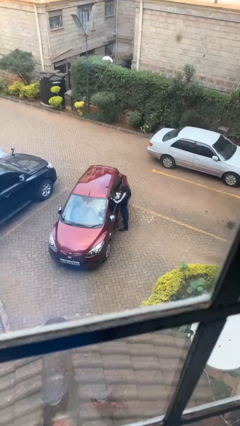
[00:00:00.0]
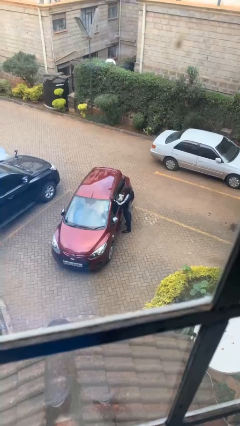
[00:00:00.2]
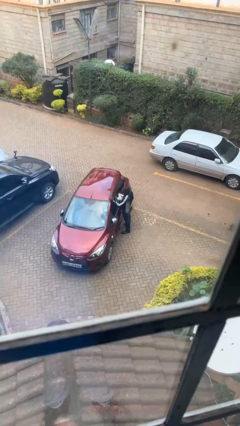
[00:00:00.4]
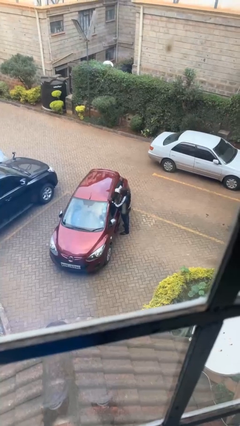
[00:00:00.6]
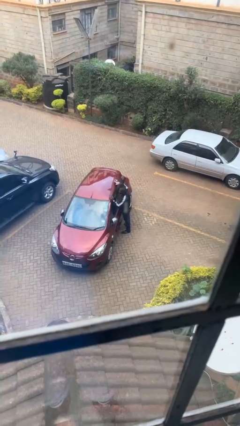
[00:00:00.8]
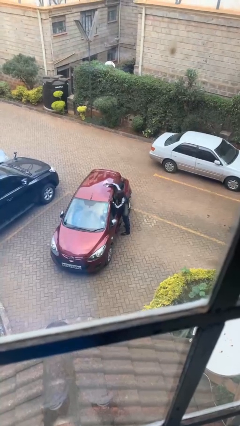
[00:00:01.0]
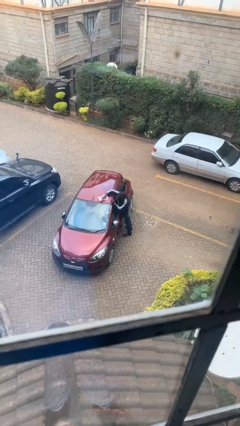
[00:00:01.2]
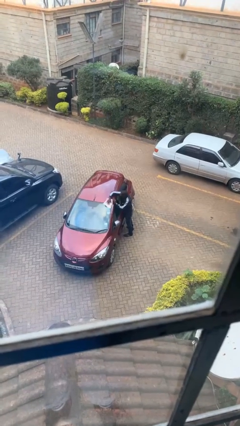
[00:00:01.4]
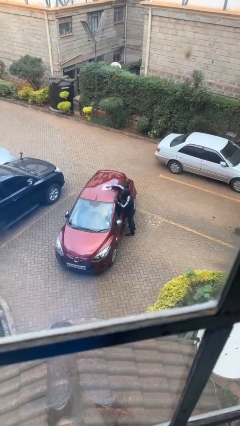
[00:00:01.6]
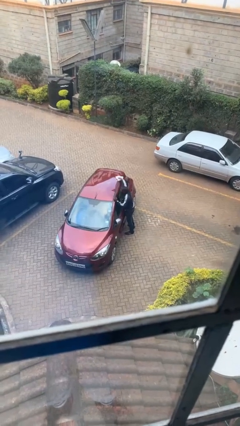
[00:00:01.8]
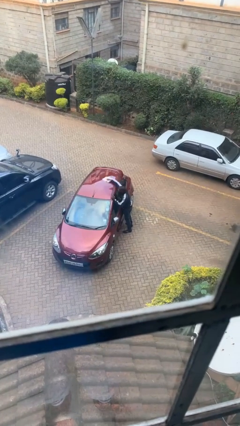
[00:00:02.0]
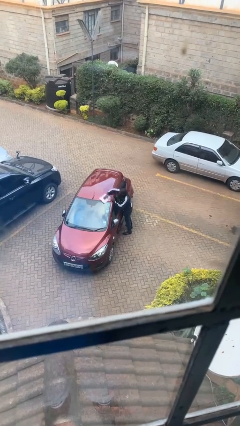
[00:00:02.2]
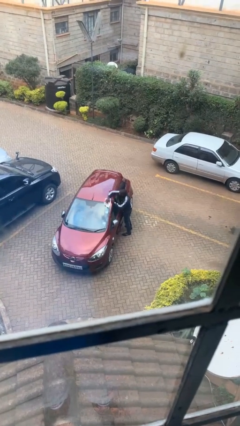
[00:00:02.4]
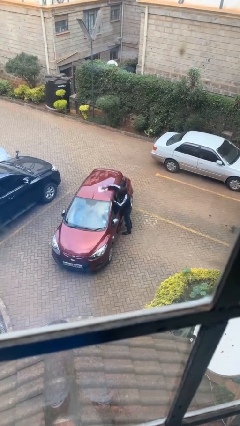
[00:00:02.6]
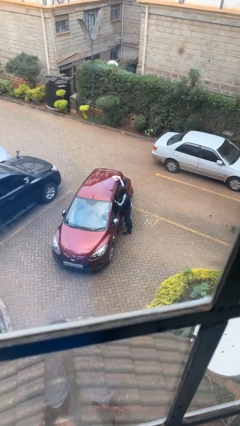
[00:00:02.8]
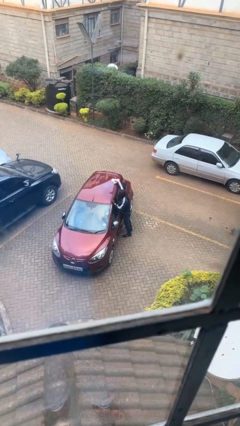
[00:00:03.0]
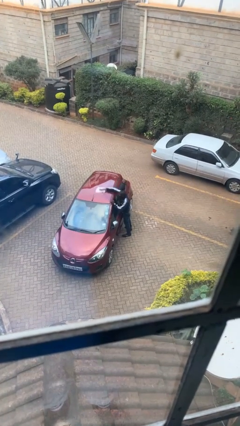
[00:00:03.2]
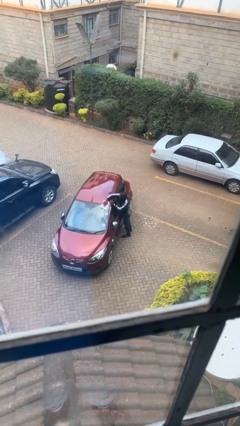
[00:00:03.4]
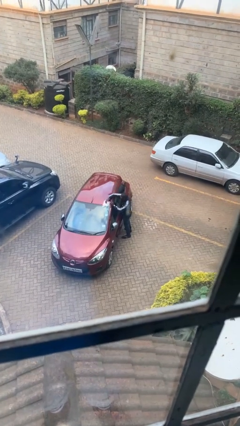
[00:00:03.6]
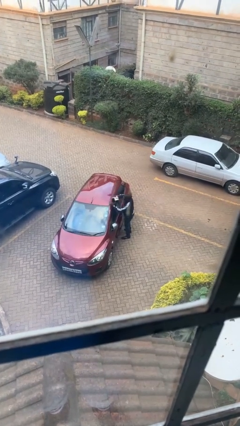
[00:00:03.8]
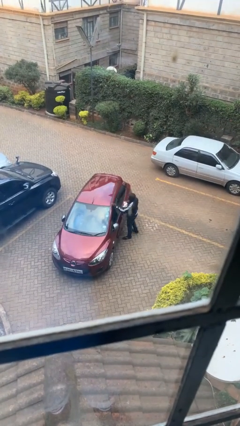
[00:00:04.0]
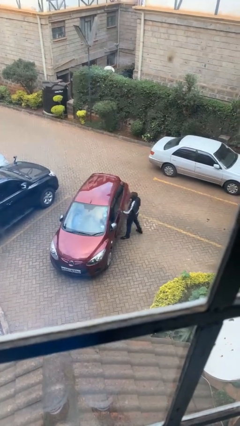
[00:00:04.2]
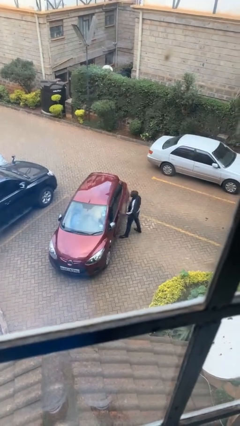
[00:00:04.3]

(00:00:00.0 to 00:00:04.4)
person polishes car with rag

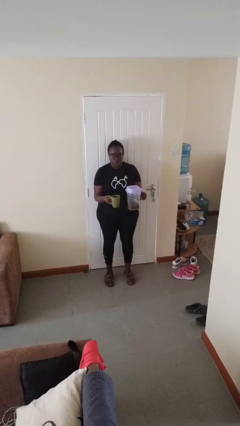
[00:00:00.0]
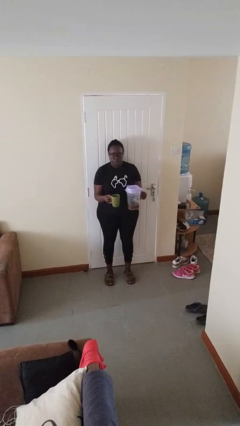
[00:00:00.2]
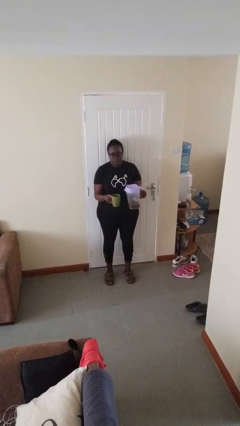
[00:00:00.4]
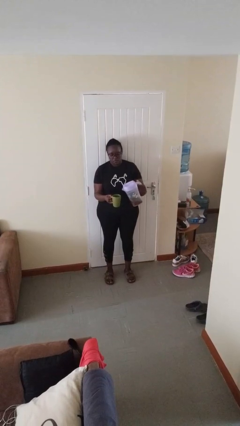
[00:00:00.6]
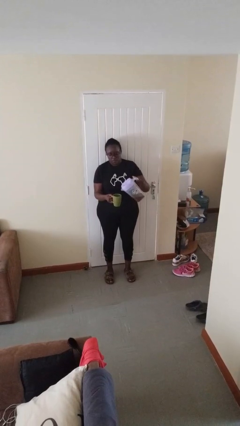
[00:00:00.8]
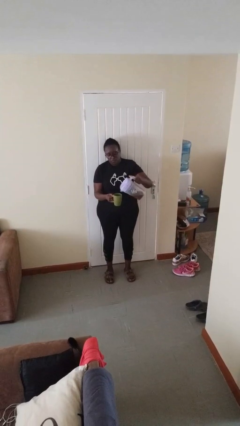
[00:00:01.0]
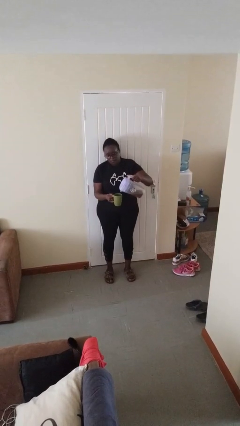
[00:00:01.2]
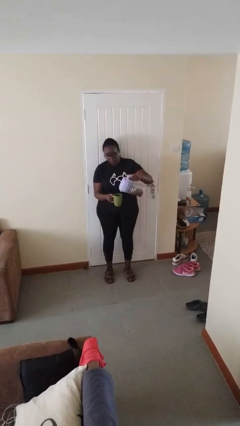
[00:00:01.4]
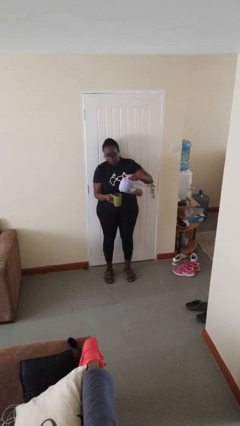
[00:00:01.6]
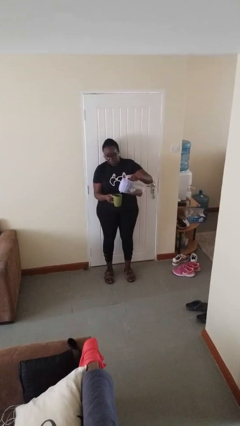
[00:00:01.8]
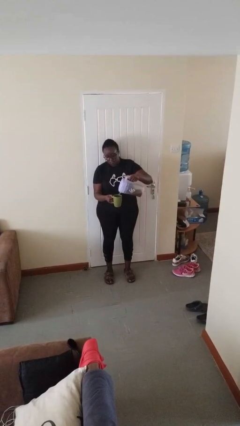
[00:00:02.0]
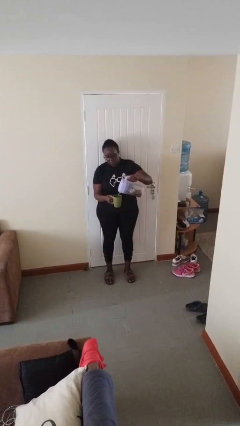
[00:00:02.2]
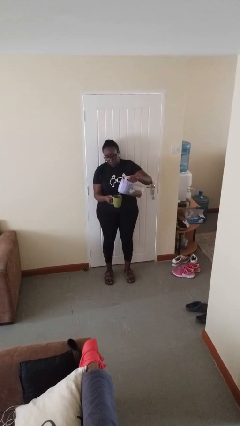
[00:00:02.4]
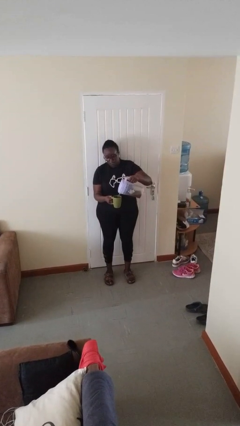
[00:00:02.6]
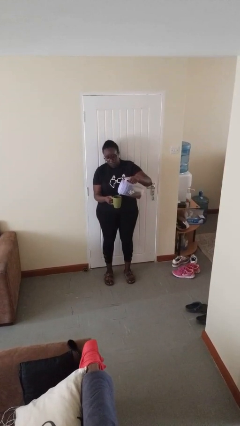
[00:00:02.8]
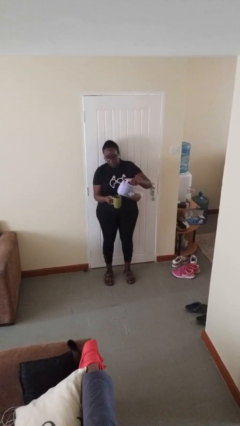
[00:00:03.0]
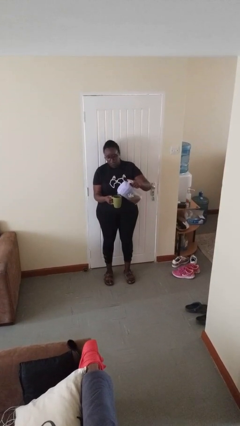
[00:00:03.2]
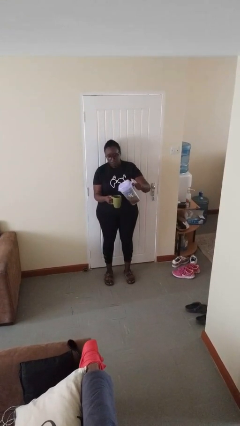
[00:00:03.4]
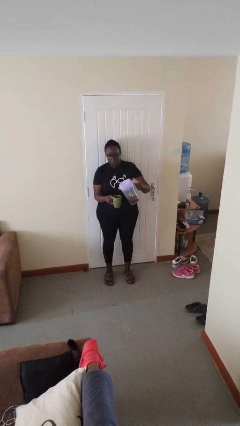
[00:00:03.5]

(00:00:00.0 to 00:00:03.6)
person pours coffee into mug

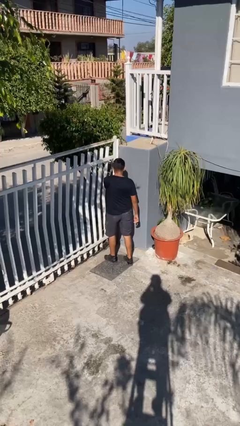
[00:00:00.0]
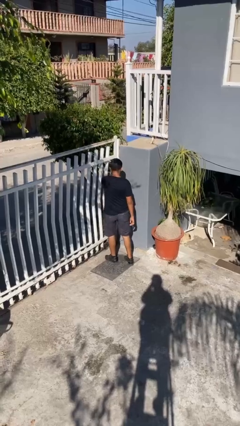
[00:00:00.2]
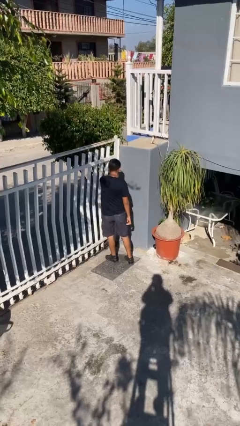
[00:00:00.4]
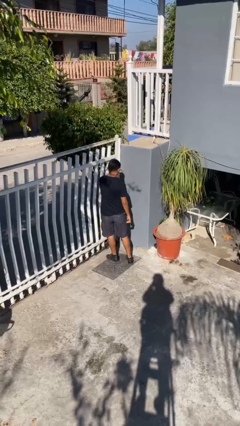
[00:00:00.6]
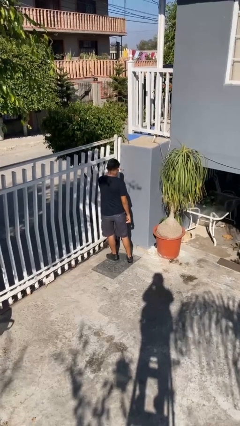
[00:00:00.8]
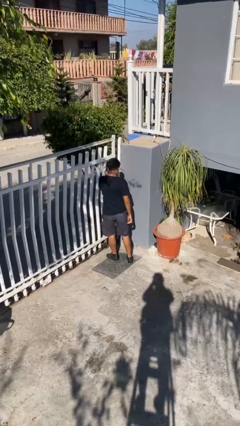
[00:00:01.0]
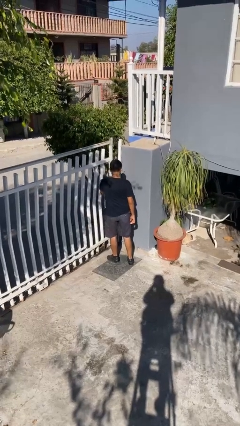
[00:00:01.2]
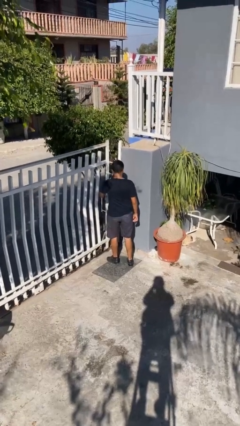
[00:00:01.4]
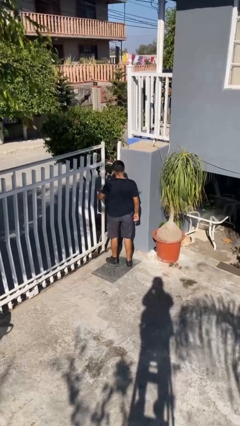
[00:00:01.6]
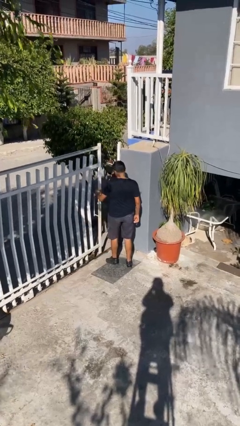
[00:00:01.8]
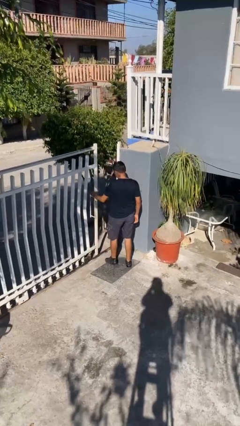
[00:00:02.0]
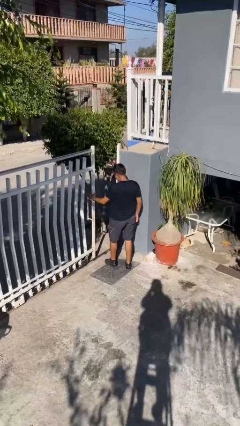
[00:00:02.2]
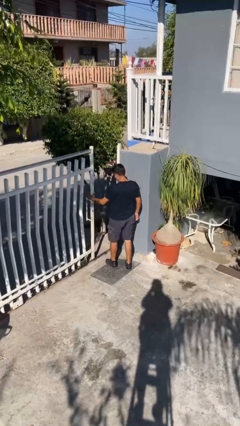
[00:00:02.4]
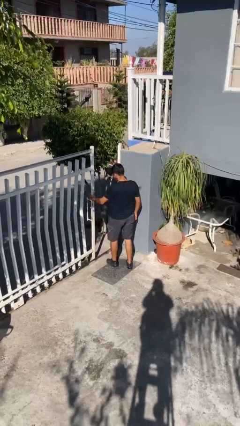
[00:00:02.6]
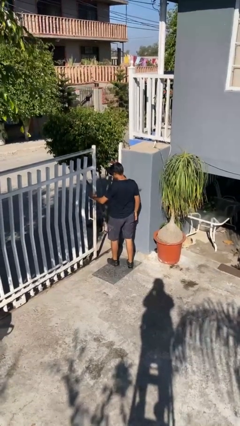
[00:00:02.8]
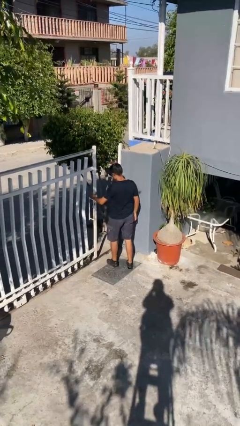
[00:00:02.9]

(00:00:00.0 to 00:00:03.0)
person opens facility door

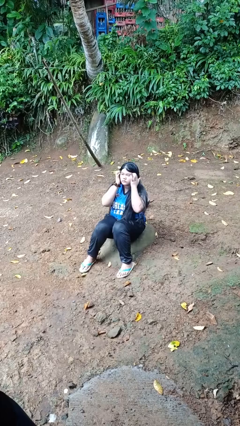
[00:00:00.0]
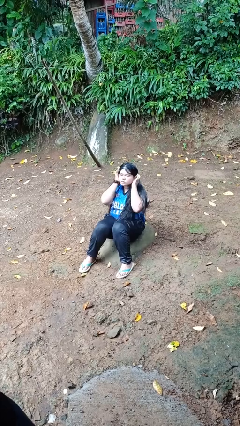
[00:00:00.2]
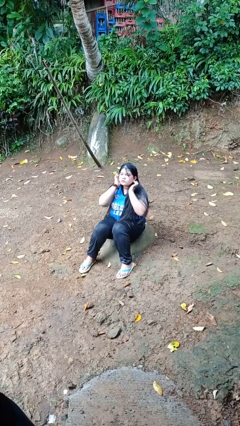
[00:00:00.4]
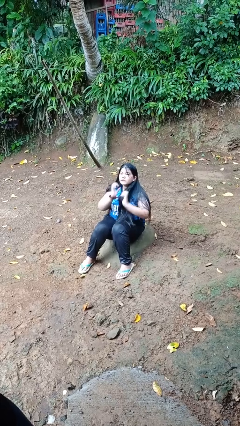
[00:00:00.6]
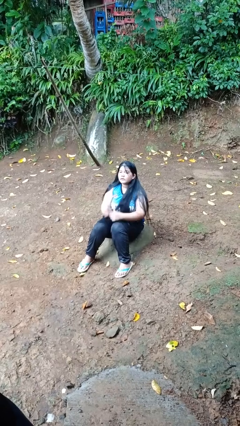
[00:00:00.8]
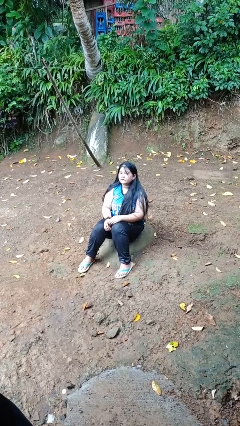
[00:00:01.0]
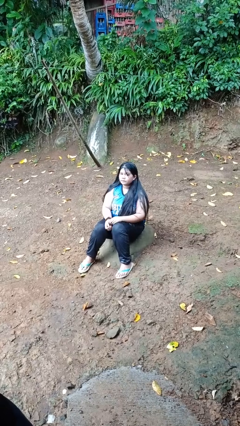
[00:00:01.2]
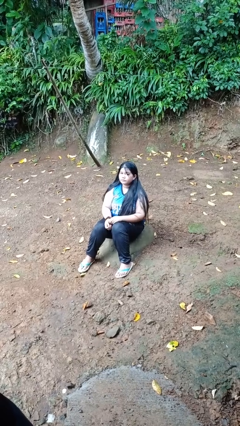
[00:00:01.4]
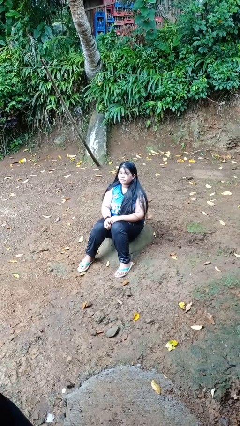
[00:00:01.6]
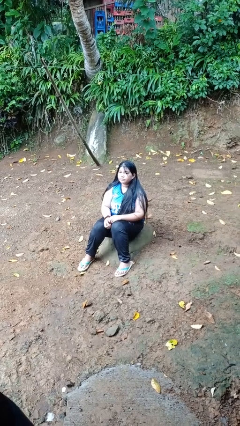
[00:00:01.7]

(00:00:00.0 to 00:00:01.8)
person strokes hair

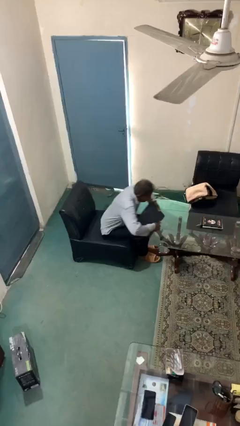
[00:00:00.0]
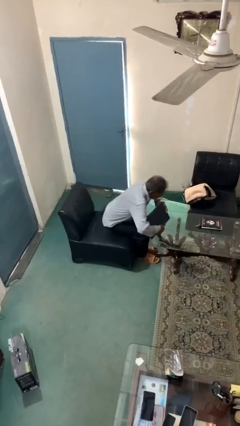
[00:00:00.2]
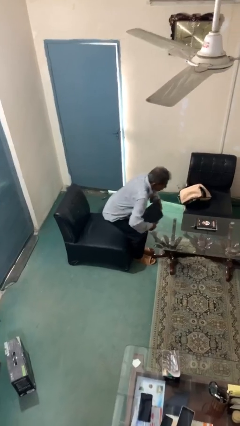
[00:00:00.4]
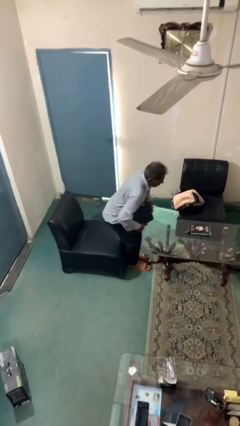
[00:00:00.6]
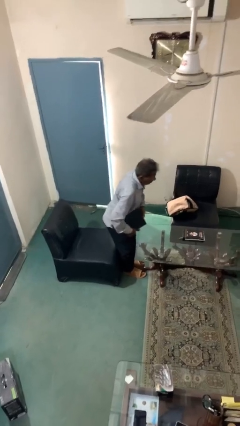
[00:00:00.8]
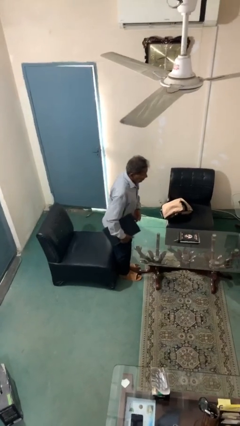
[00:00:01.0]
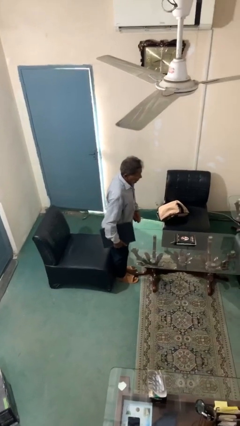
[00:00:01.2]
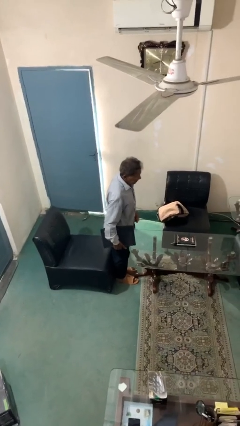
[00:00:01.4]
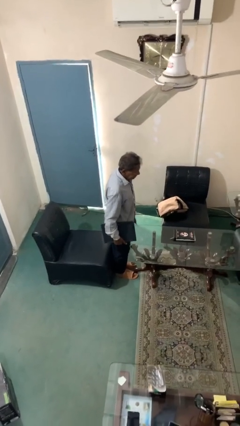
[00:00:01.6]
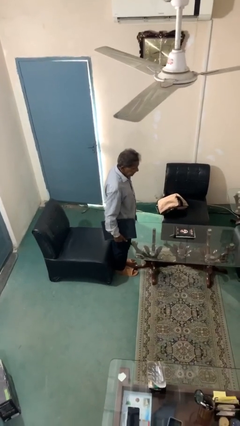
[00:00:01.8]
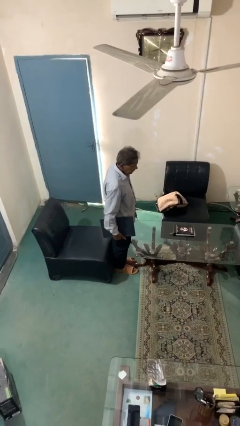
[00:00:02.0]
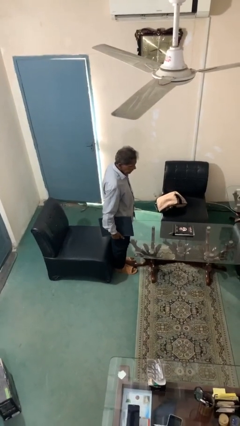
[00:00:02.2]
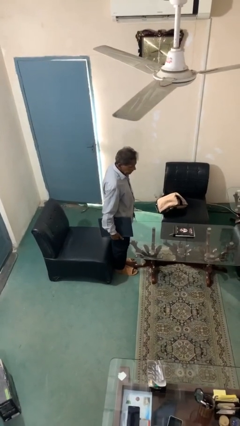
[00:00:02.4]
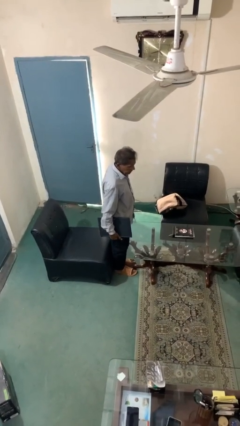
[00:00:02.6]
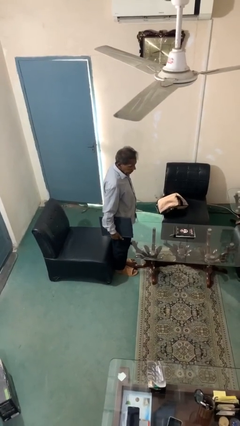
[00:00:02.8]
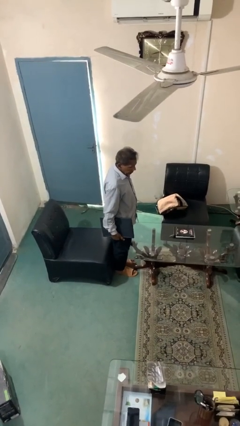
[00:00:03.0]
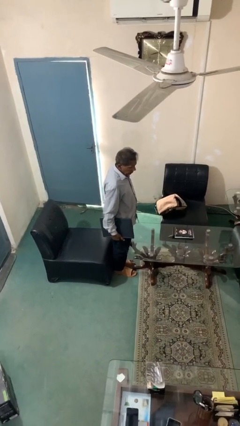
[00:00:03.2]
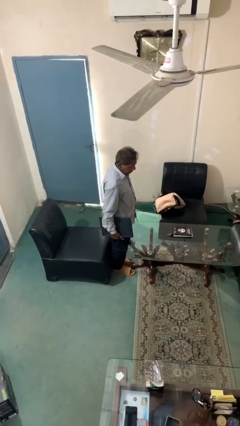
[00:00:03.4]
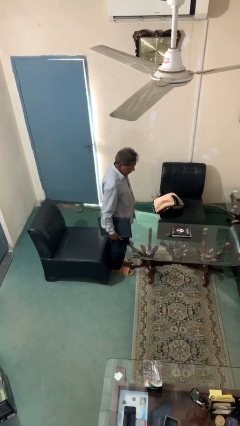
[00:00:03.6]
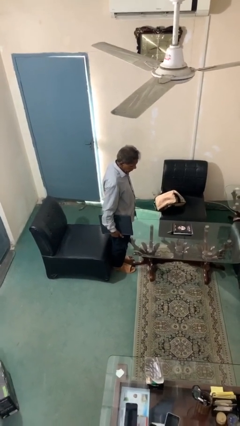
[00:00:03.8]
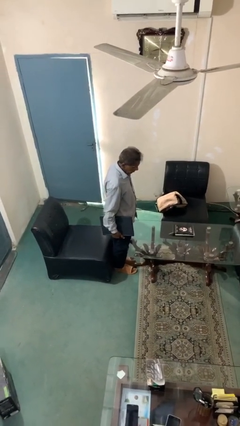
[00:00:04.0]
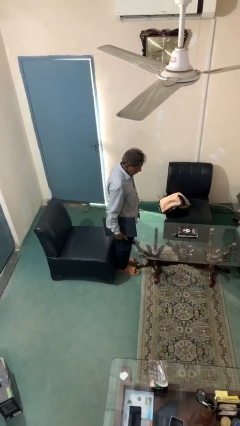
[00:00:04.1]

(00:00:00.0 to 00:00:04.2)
person stands up
